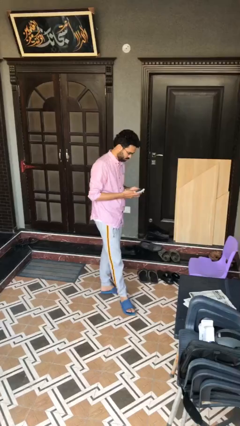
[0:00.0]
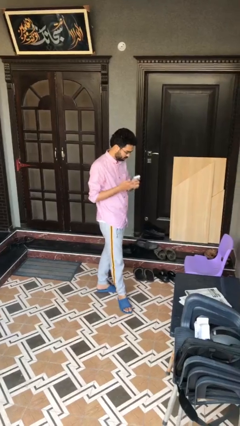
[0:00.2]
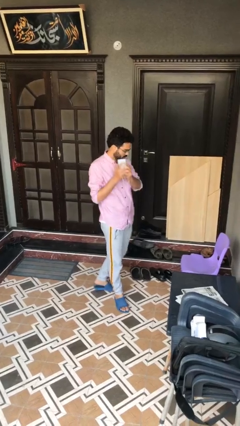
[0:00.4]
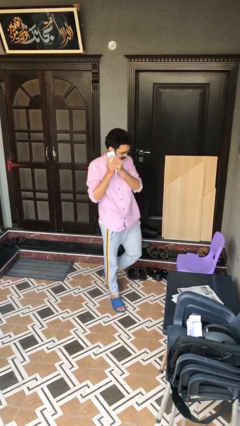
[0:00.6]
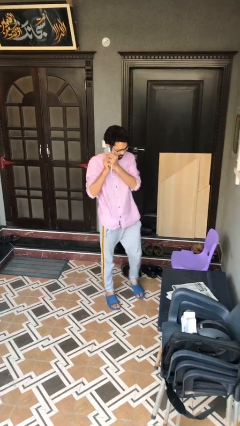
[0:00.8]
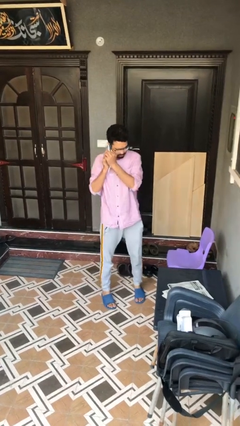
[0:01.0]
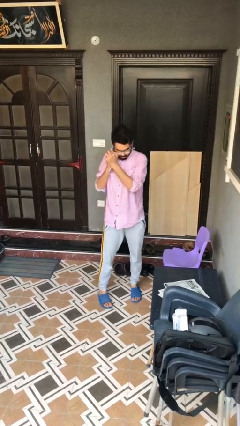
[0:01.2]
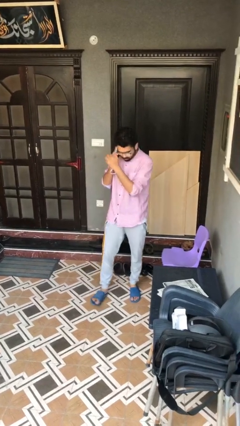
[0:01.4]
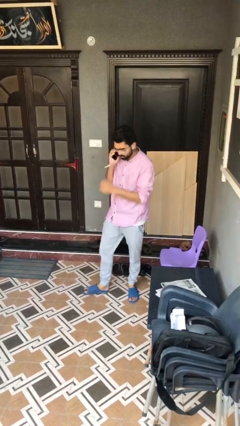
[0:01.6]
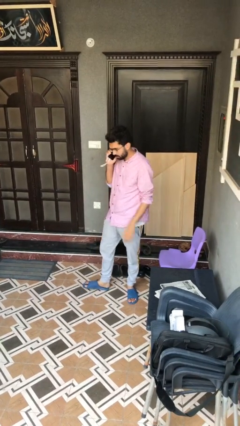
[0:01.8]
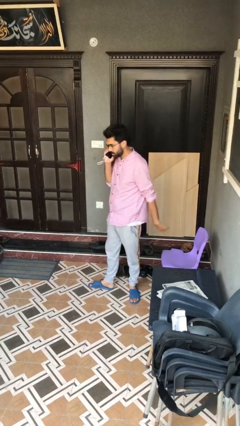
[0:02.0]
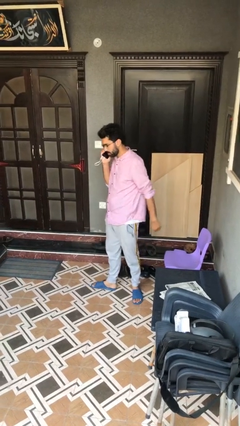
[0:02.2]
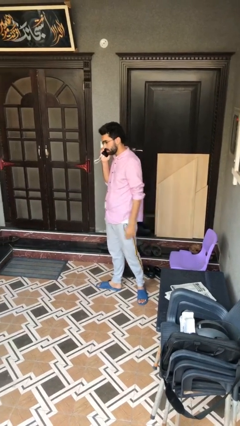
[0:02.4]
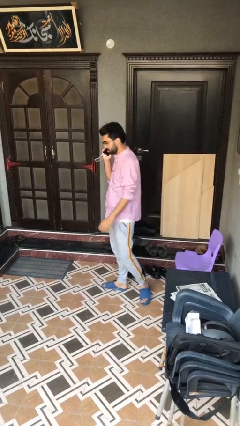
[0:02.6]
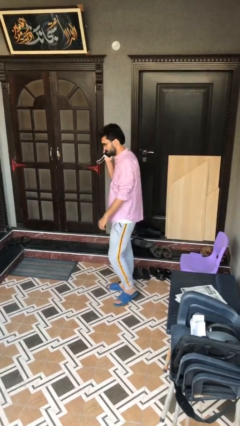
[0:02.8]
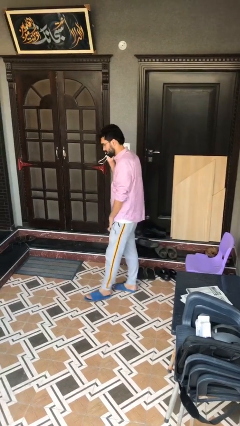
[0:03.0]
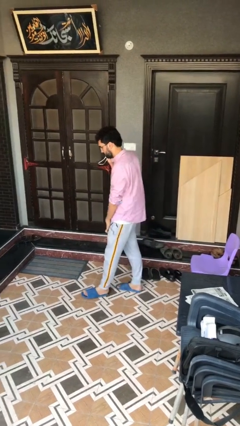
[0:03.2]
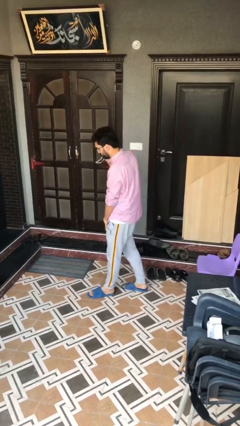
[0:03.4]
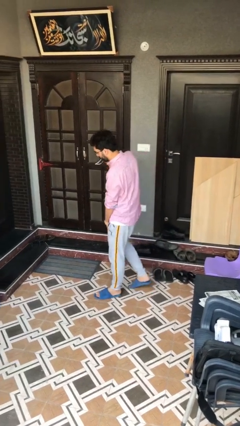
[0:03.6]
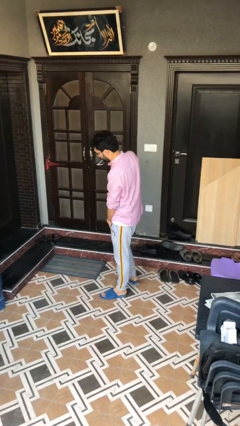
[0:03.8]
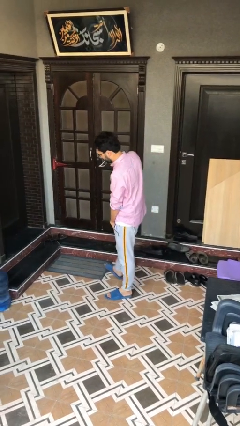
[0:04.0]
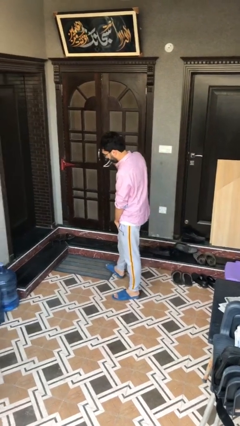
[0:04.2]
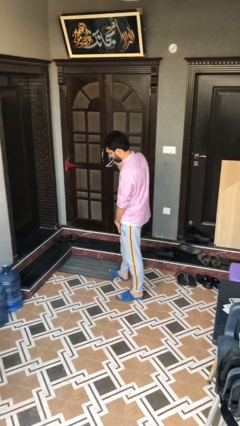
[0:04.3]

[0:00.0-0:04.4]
person talks on phone

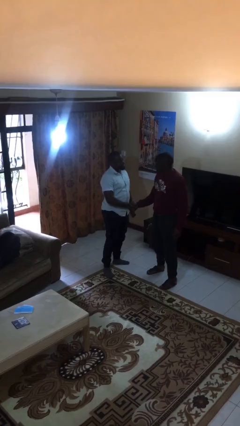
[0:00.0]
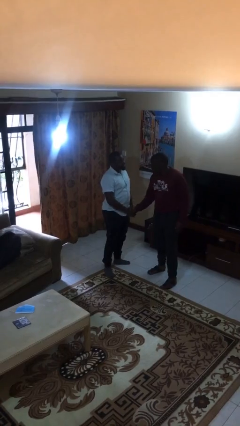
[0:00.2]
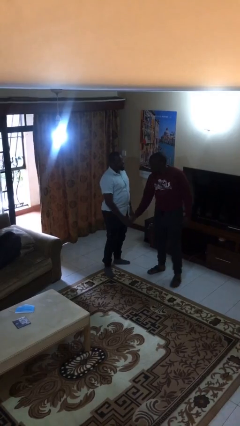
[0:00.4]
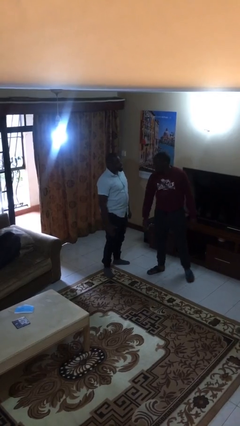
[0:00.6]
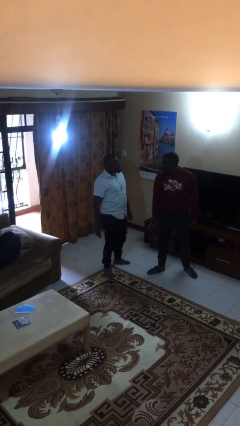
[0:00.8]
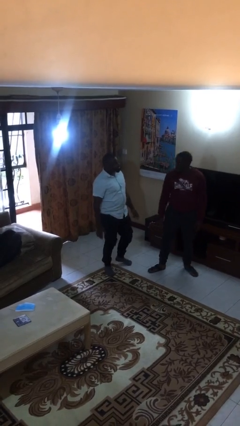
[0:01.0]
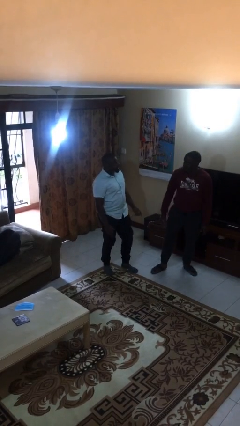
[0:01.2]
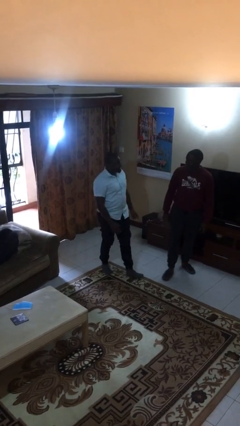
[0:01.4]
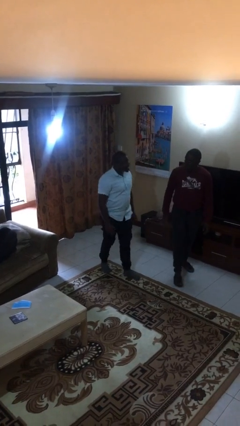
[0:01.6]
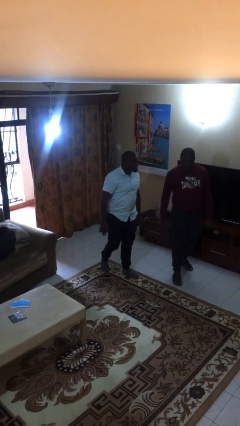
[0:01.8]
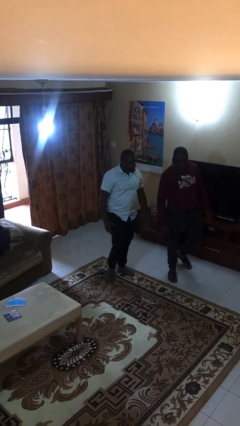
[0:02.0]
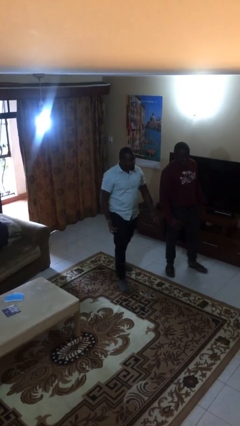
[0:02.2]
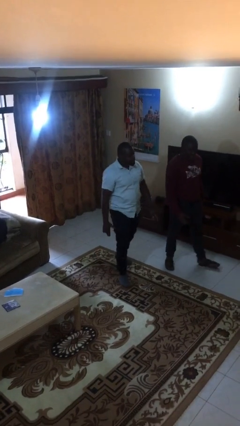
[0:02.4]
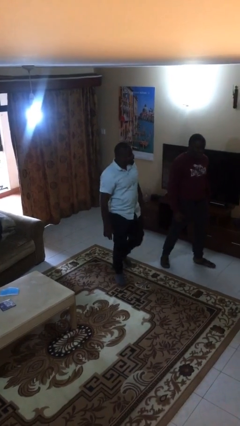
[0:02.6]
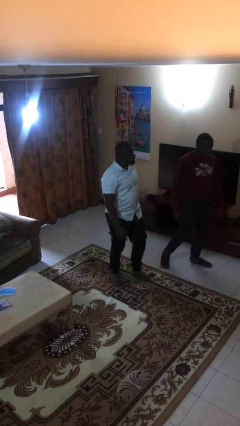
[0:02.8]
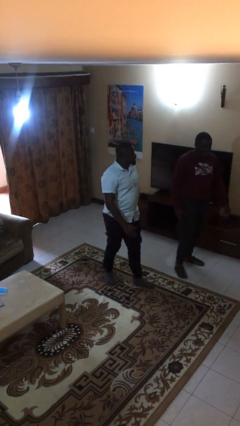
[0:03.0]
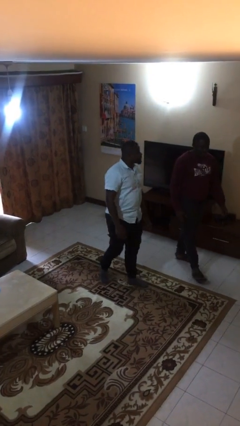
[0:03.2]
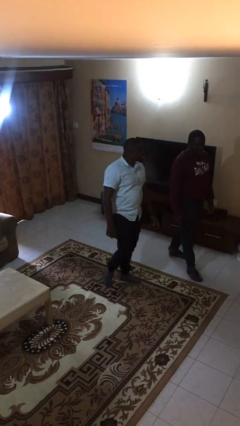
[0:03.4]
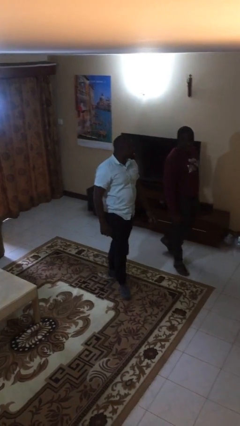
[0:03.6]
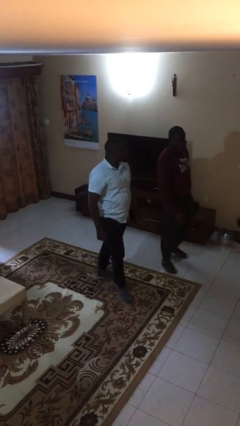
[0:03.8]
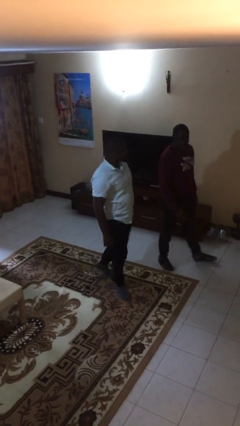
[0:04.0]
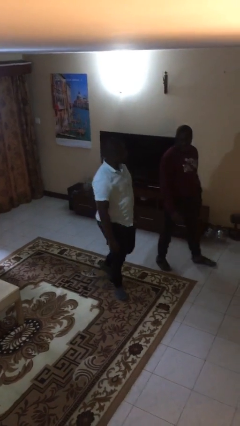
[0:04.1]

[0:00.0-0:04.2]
person talks to person

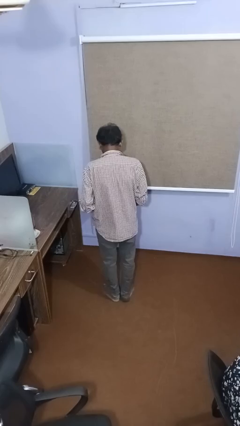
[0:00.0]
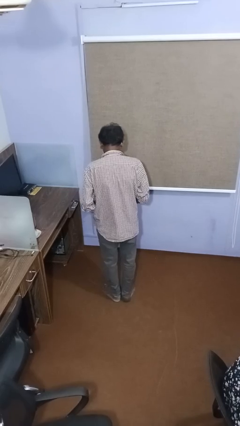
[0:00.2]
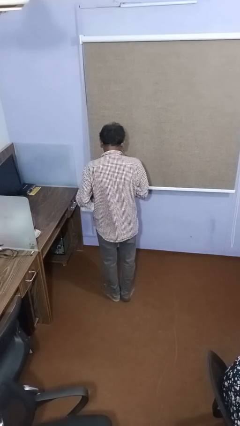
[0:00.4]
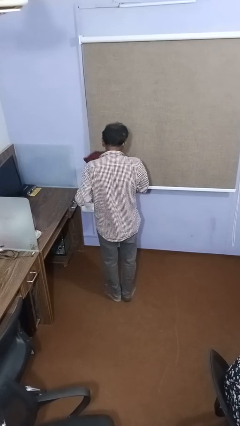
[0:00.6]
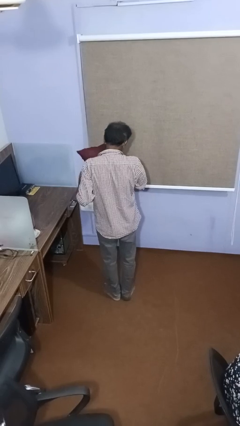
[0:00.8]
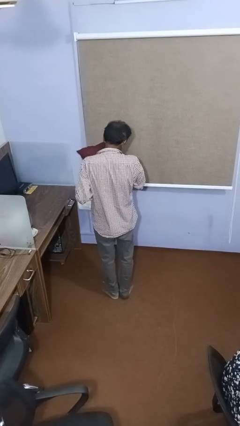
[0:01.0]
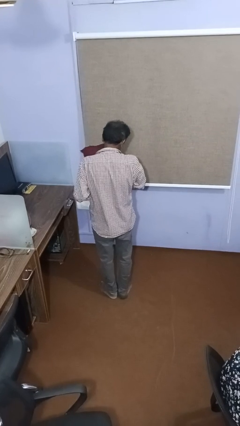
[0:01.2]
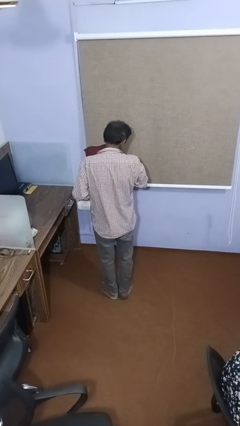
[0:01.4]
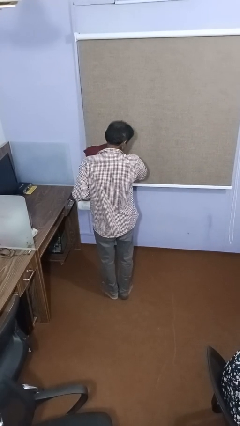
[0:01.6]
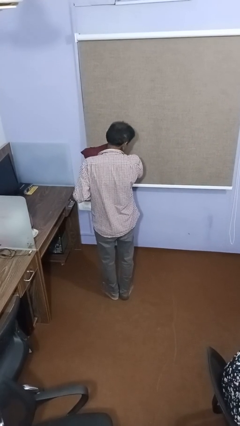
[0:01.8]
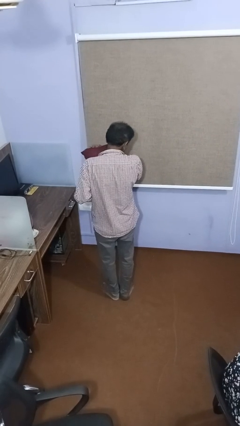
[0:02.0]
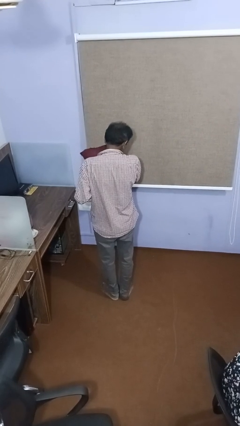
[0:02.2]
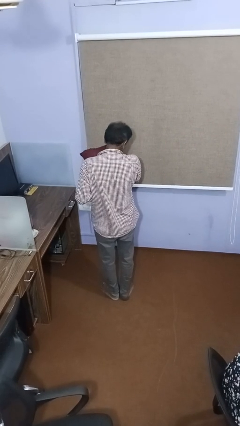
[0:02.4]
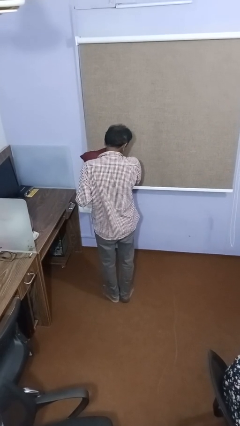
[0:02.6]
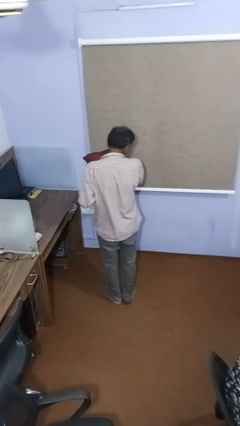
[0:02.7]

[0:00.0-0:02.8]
person hugs stuffed animal

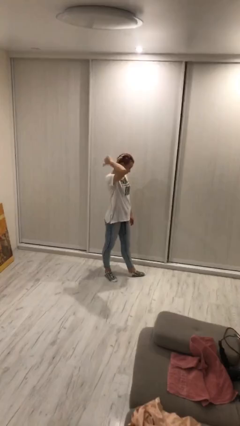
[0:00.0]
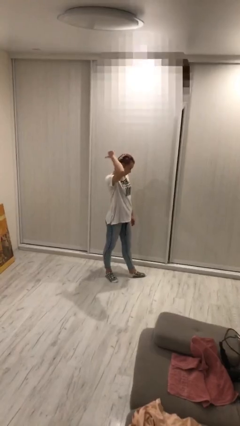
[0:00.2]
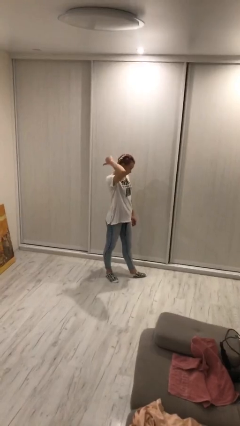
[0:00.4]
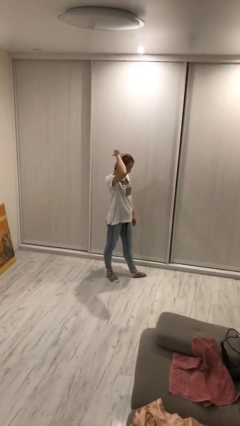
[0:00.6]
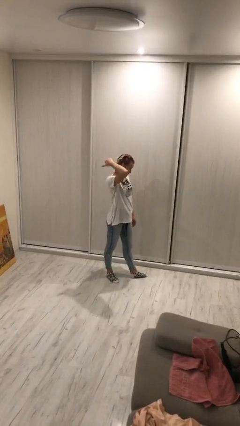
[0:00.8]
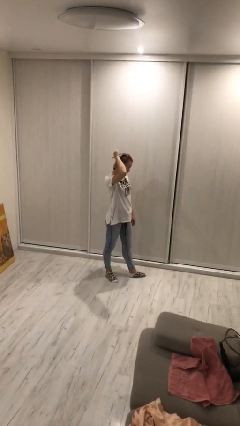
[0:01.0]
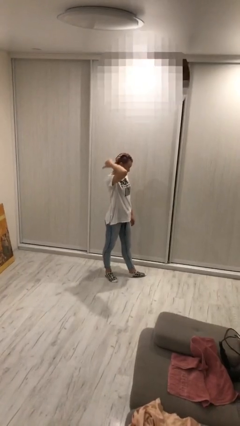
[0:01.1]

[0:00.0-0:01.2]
person gestures behind me

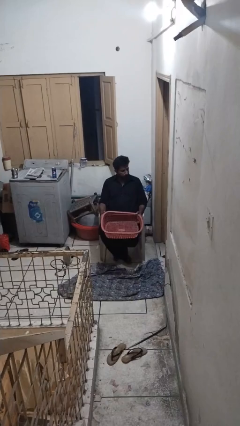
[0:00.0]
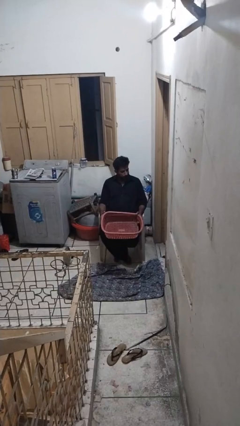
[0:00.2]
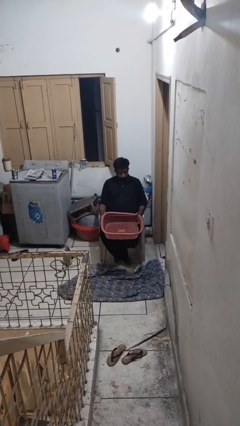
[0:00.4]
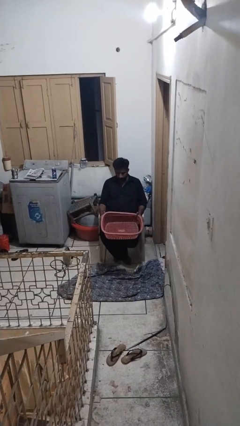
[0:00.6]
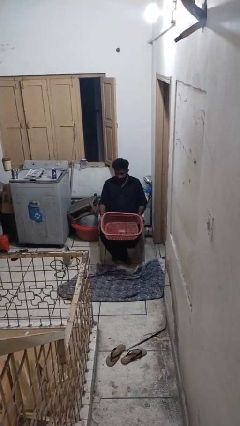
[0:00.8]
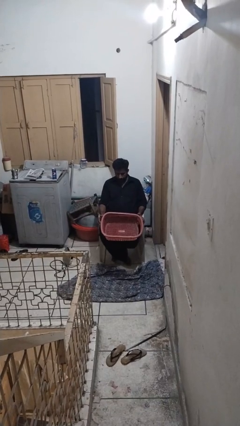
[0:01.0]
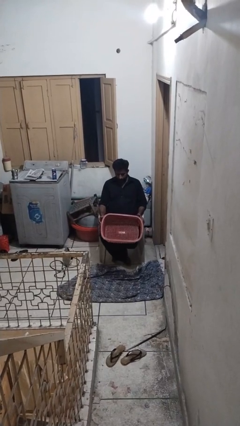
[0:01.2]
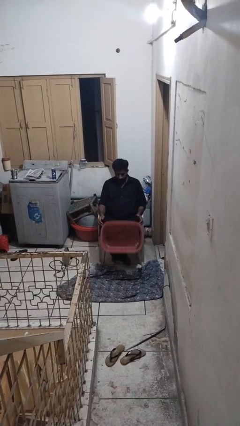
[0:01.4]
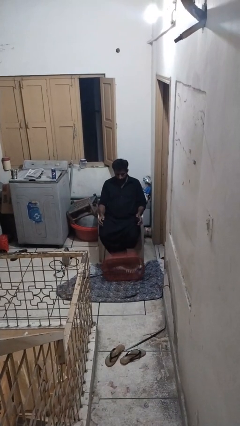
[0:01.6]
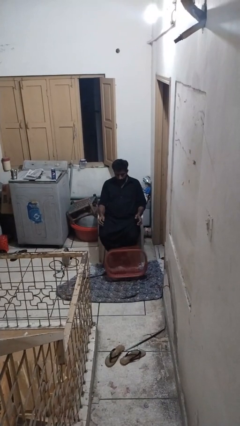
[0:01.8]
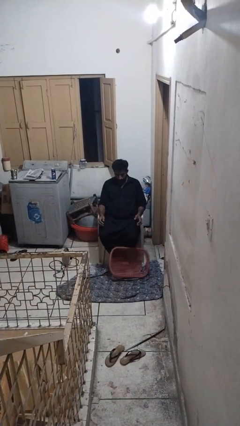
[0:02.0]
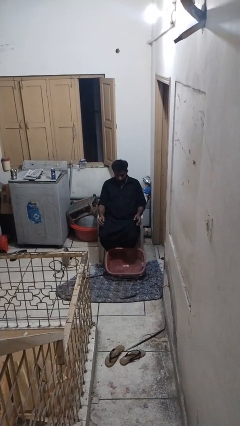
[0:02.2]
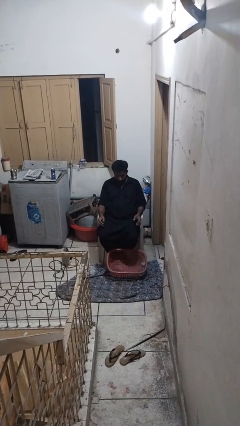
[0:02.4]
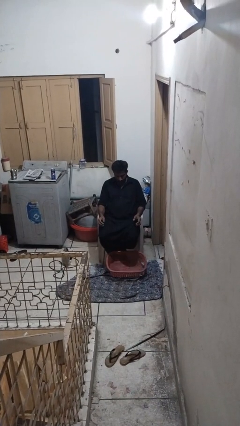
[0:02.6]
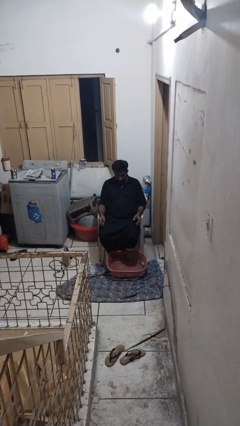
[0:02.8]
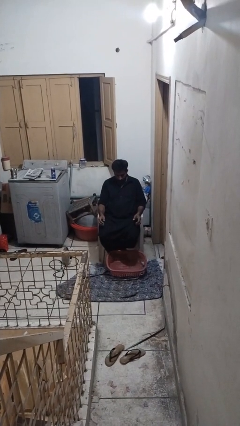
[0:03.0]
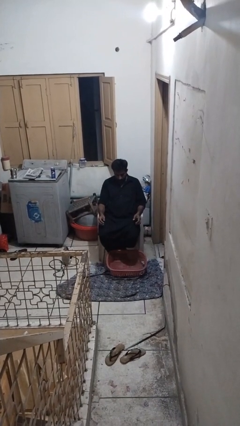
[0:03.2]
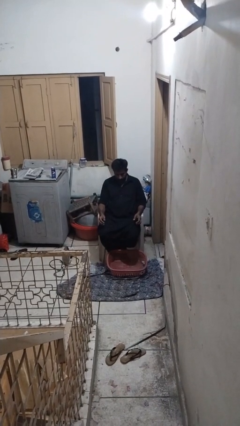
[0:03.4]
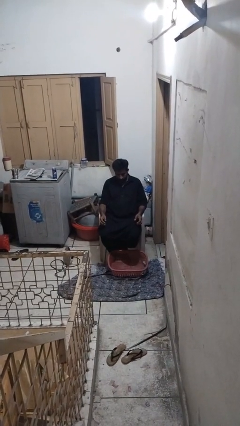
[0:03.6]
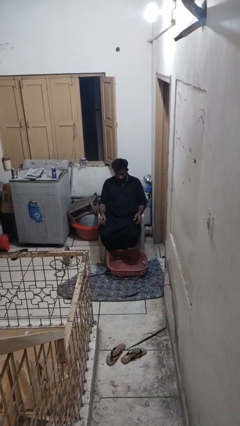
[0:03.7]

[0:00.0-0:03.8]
person drops object

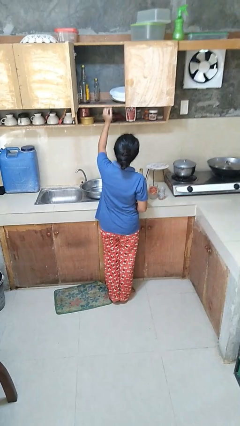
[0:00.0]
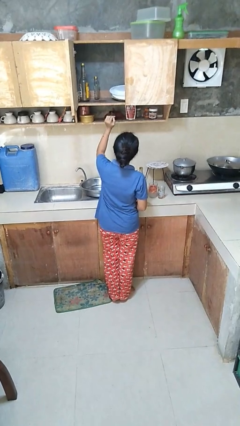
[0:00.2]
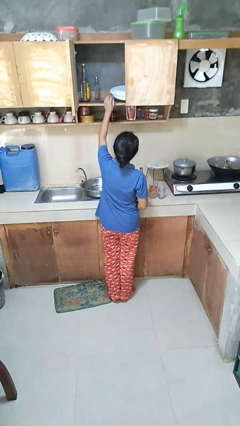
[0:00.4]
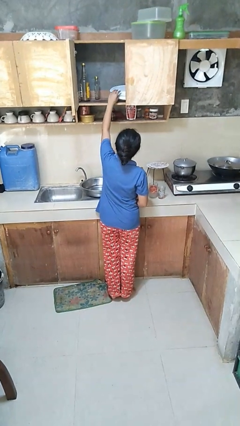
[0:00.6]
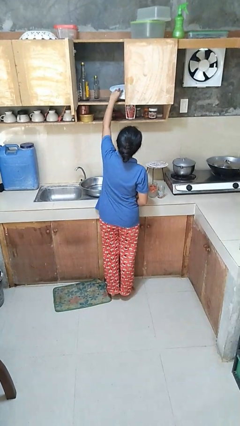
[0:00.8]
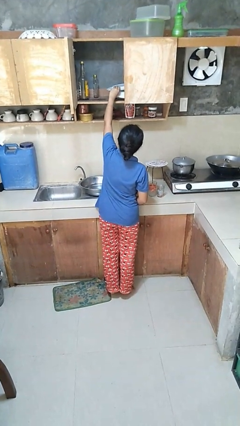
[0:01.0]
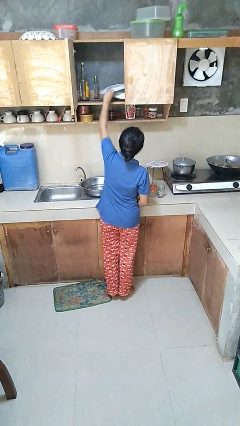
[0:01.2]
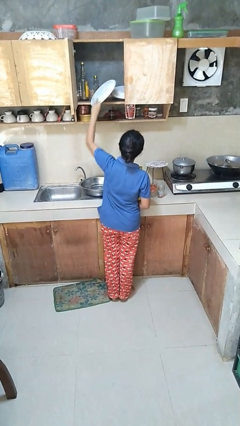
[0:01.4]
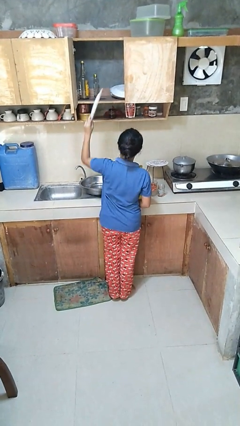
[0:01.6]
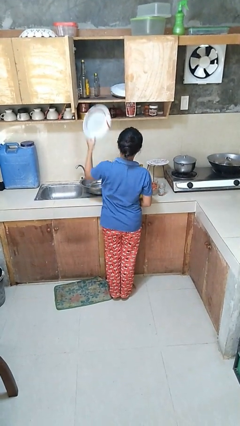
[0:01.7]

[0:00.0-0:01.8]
person takes object from cabinet
